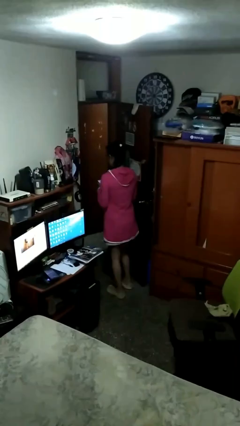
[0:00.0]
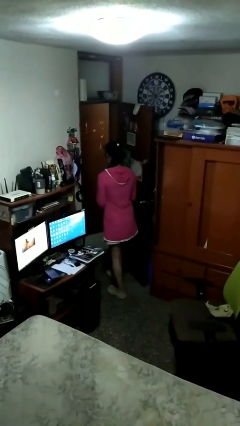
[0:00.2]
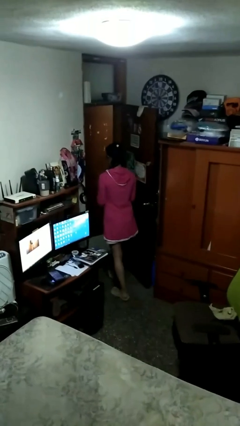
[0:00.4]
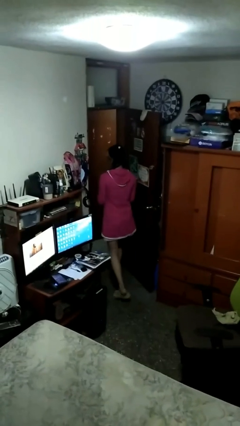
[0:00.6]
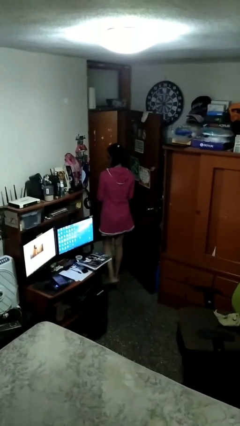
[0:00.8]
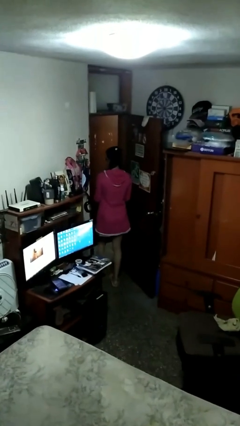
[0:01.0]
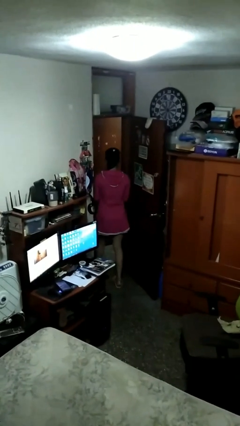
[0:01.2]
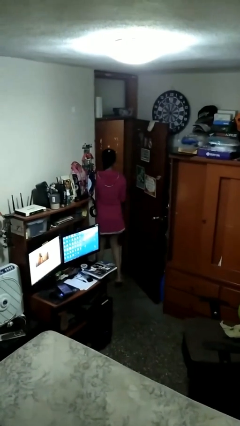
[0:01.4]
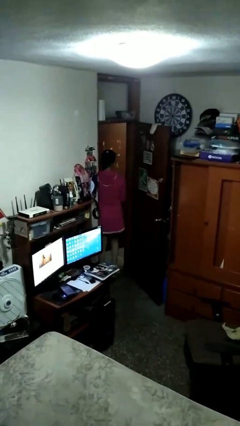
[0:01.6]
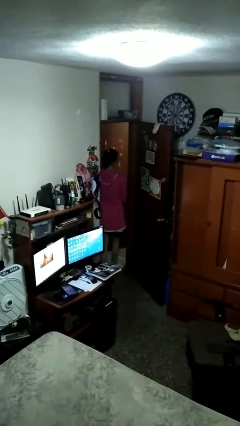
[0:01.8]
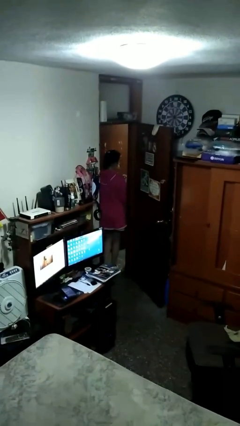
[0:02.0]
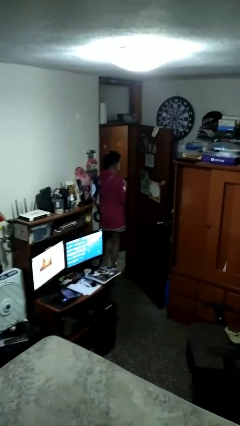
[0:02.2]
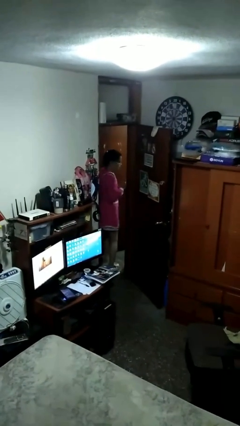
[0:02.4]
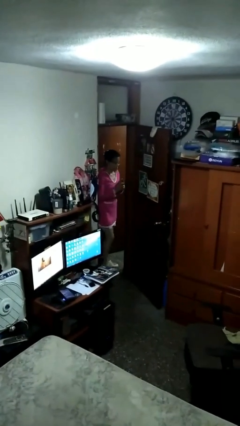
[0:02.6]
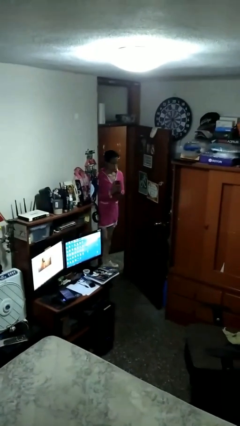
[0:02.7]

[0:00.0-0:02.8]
person exits scene through structure

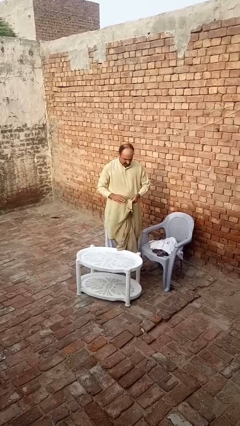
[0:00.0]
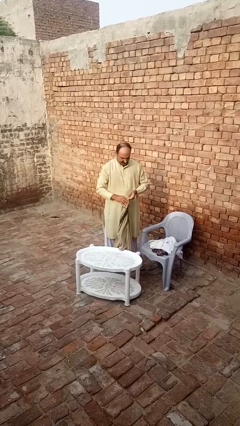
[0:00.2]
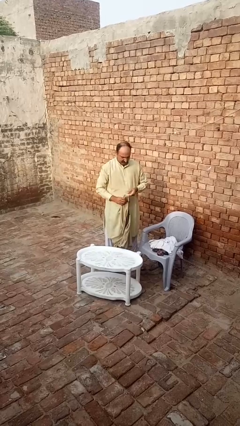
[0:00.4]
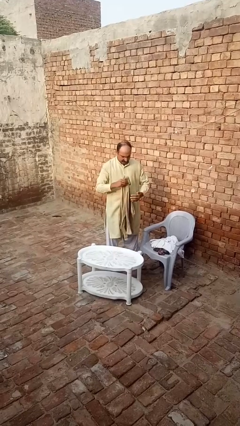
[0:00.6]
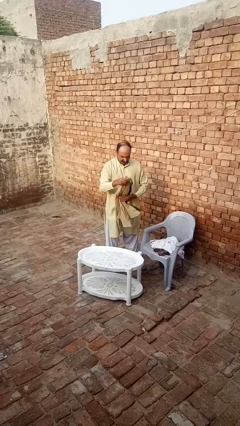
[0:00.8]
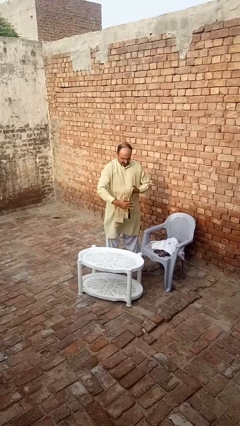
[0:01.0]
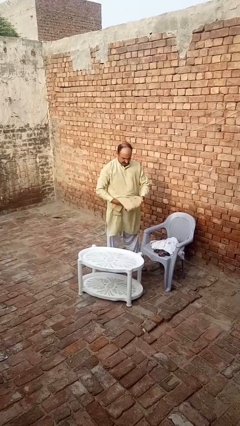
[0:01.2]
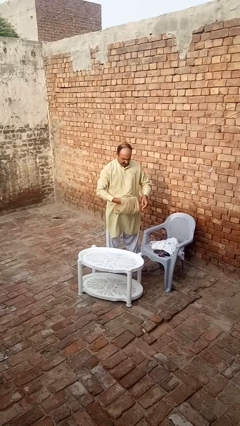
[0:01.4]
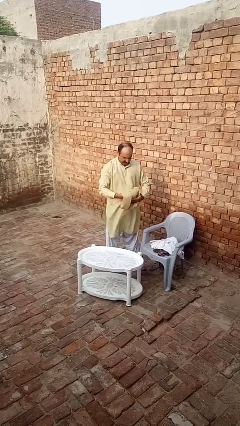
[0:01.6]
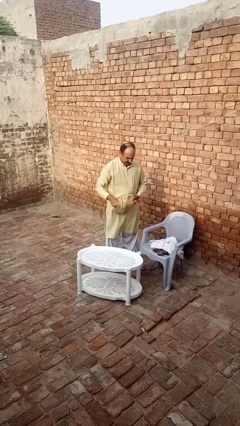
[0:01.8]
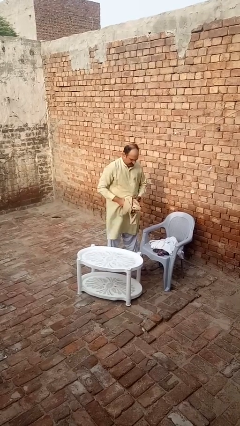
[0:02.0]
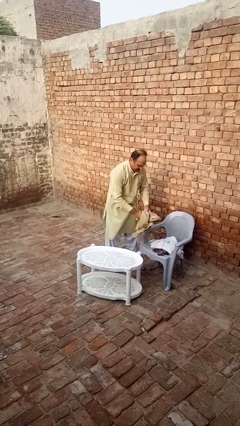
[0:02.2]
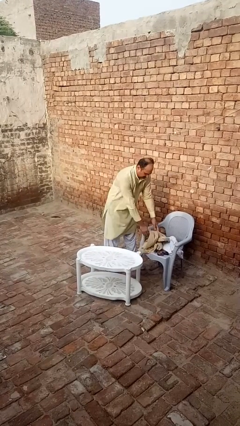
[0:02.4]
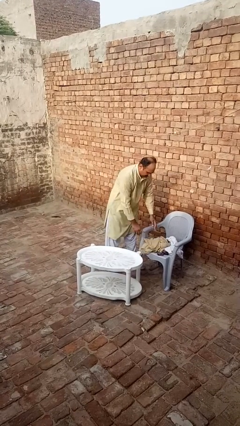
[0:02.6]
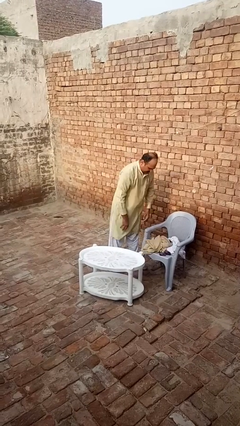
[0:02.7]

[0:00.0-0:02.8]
person folds shirt

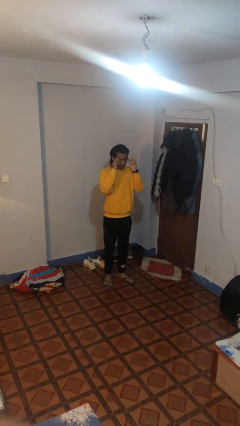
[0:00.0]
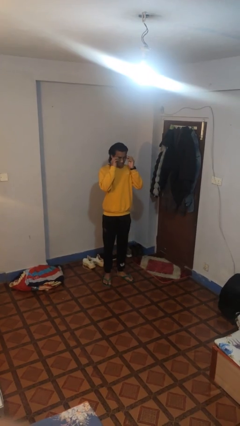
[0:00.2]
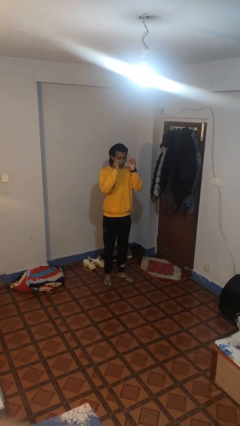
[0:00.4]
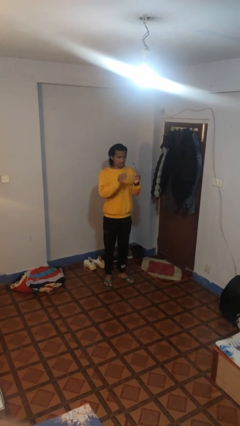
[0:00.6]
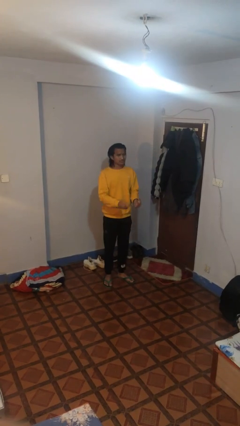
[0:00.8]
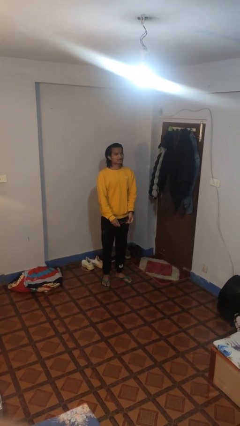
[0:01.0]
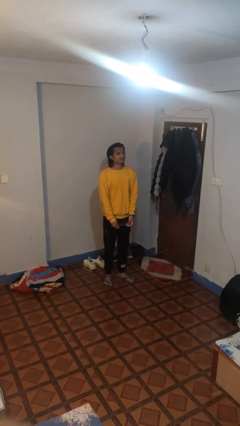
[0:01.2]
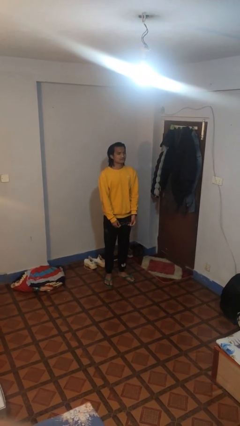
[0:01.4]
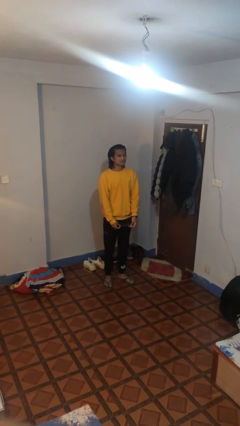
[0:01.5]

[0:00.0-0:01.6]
person takes off glasses

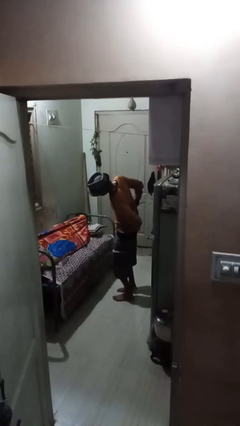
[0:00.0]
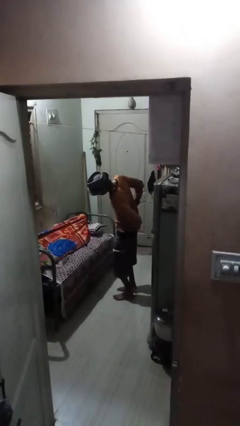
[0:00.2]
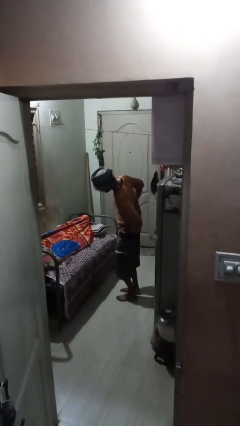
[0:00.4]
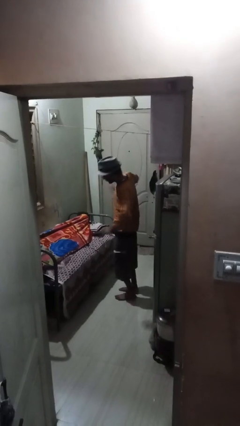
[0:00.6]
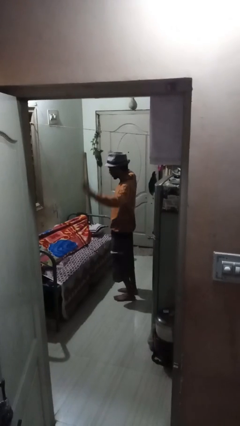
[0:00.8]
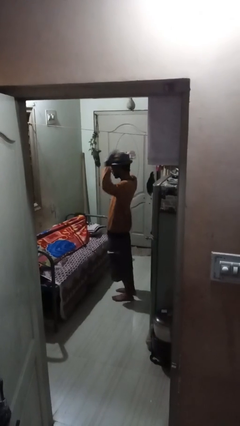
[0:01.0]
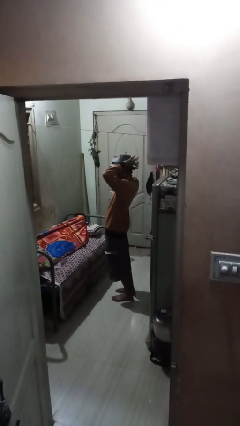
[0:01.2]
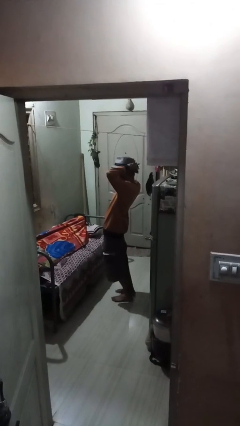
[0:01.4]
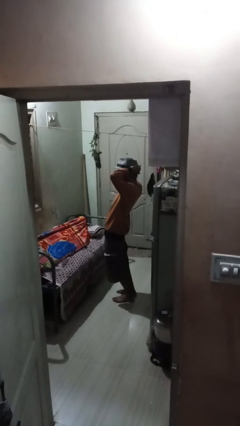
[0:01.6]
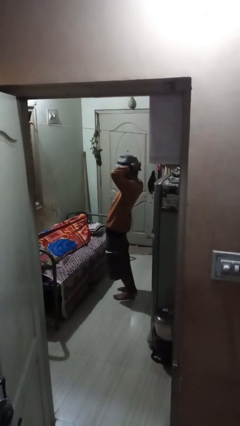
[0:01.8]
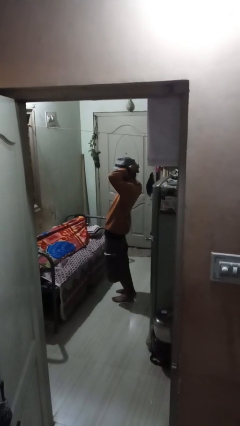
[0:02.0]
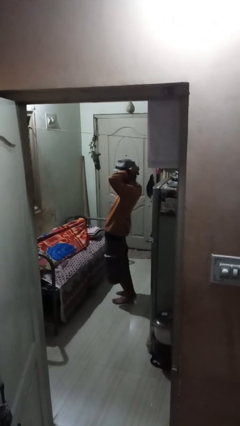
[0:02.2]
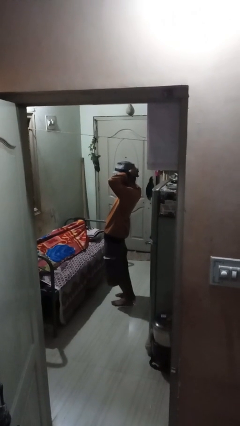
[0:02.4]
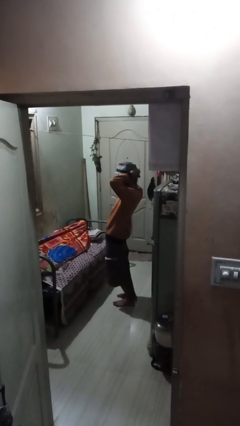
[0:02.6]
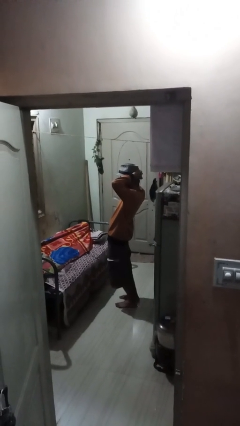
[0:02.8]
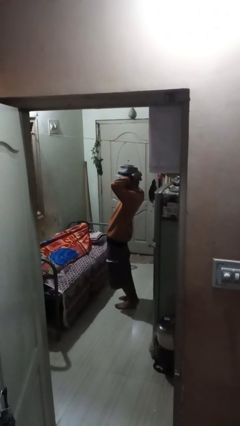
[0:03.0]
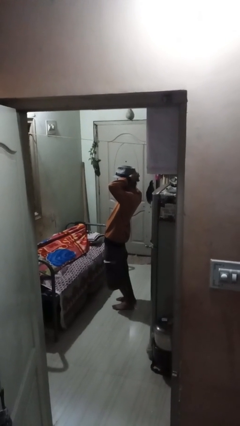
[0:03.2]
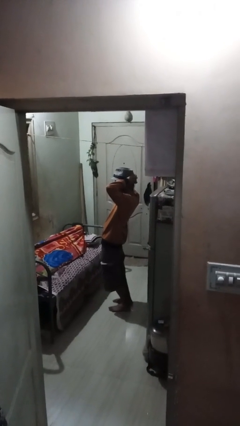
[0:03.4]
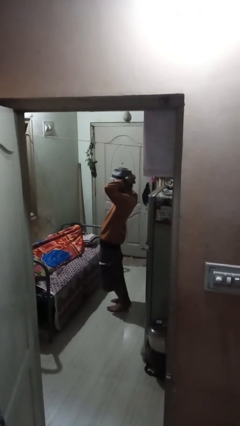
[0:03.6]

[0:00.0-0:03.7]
person stretches arms over head

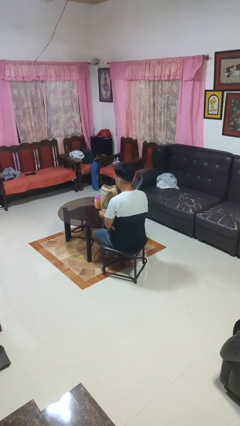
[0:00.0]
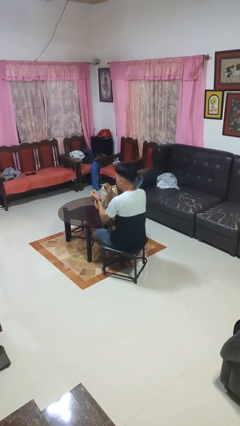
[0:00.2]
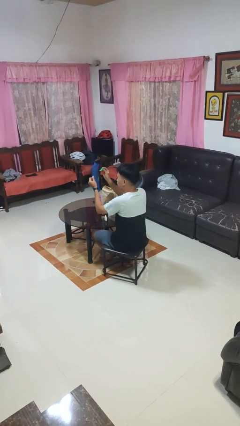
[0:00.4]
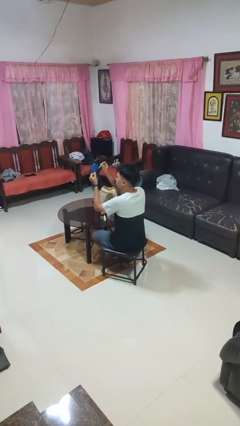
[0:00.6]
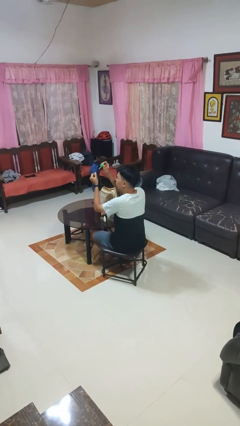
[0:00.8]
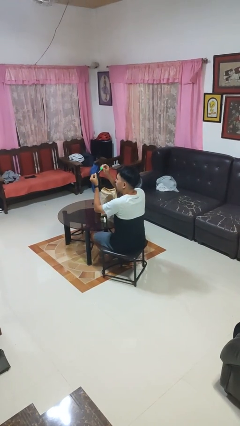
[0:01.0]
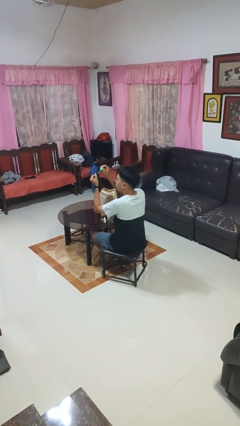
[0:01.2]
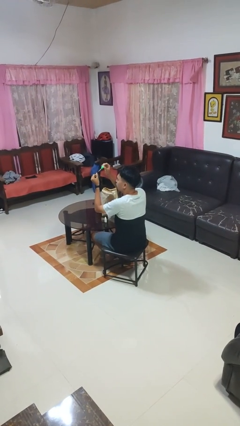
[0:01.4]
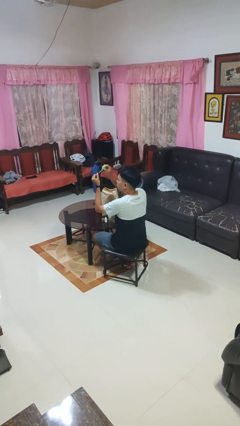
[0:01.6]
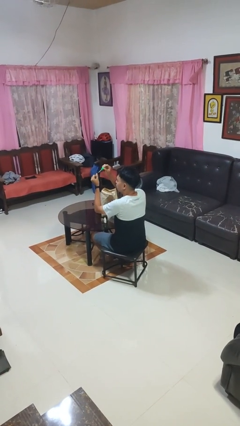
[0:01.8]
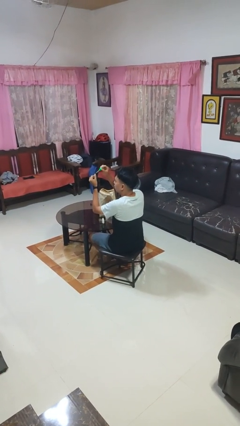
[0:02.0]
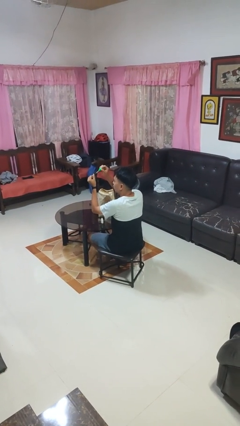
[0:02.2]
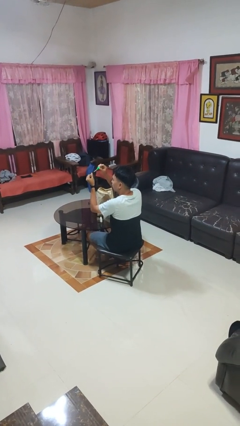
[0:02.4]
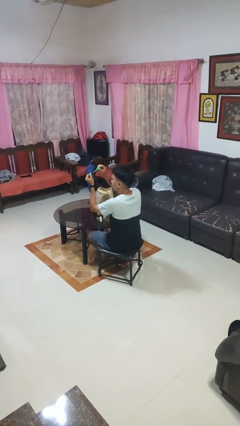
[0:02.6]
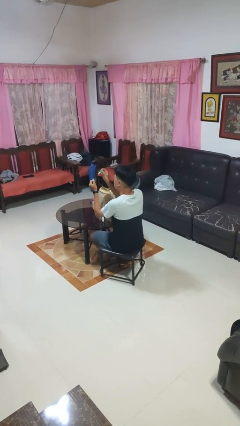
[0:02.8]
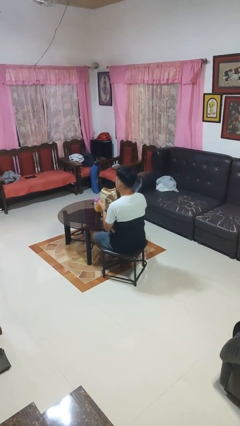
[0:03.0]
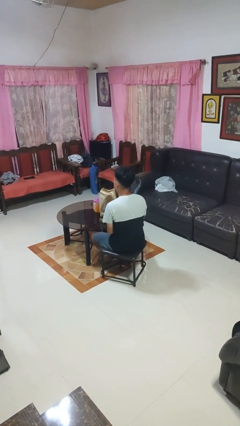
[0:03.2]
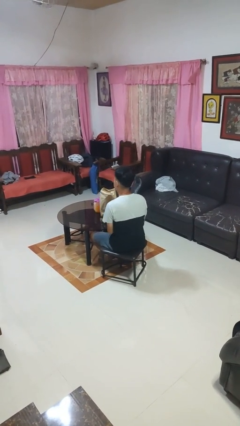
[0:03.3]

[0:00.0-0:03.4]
person paints fingernails

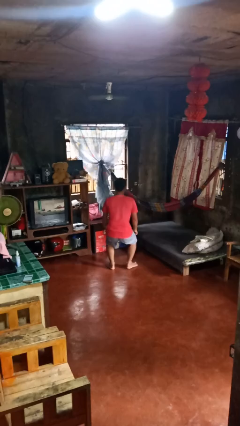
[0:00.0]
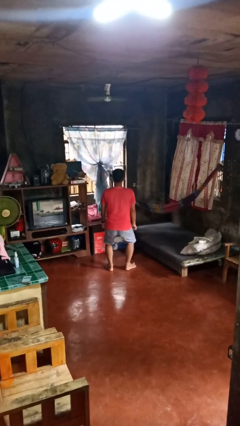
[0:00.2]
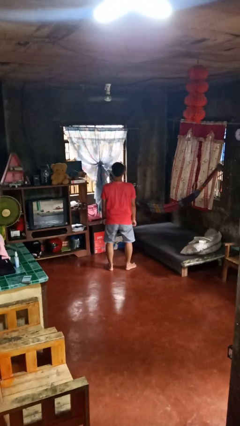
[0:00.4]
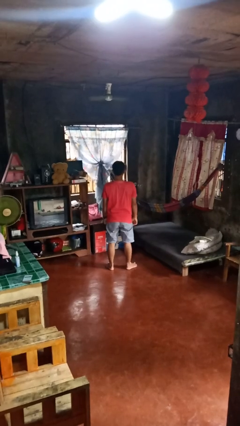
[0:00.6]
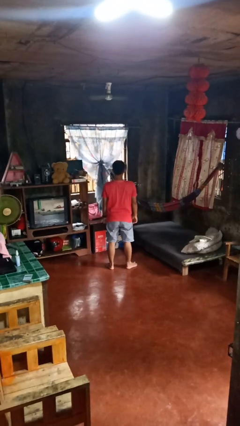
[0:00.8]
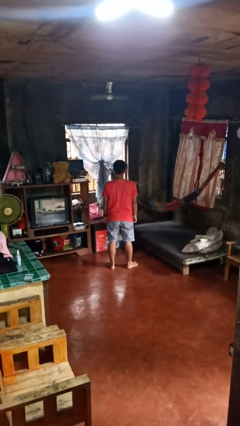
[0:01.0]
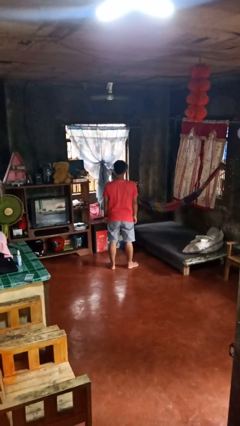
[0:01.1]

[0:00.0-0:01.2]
person stands up

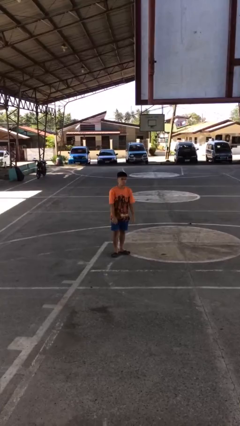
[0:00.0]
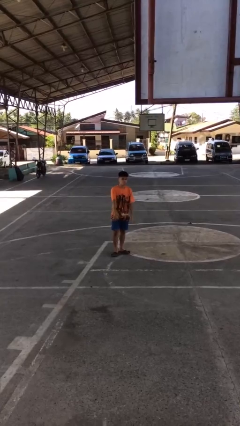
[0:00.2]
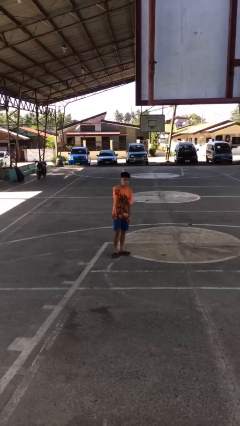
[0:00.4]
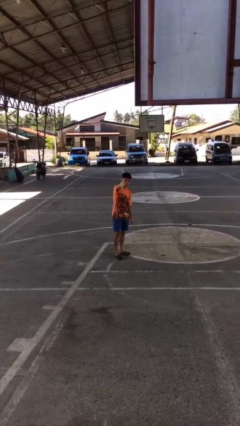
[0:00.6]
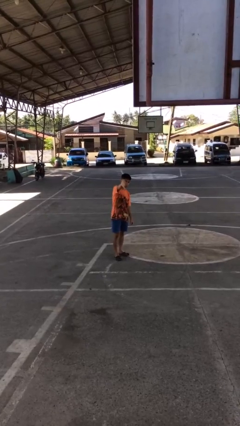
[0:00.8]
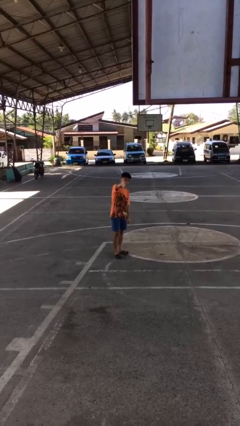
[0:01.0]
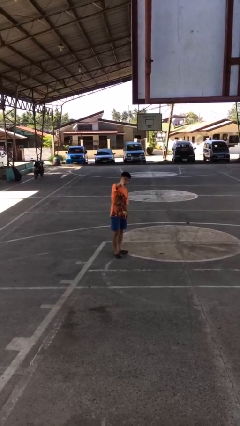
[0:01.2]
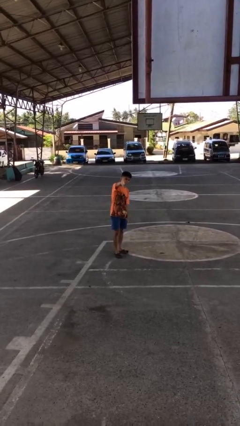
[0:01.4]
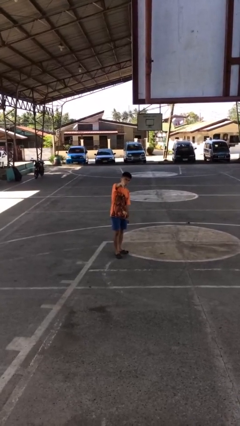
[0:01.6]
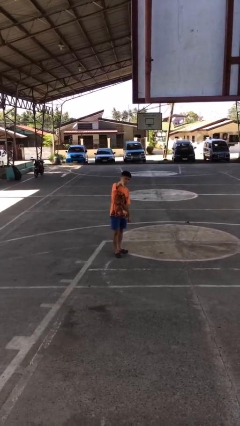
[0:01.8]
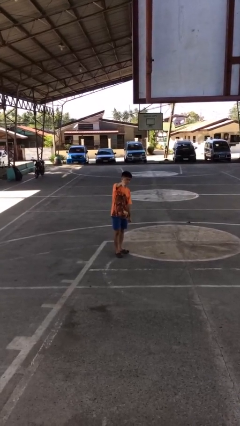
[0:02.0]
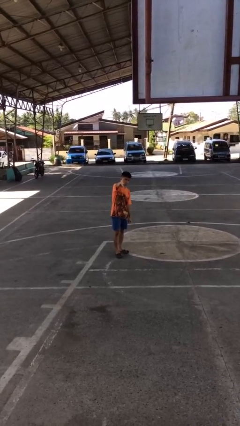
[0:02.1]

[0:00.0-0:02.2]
person gestures thumbs down
